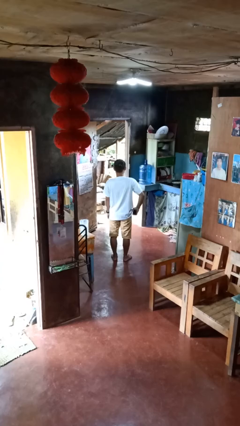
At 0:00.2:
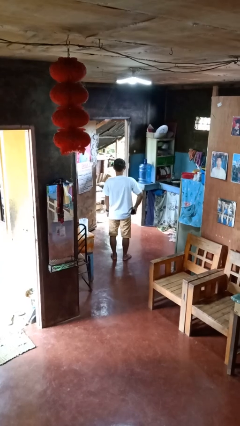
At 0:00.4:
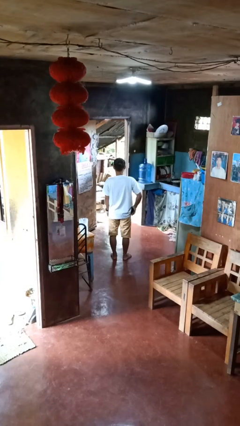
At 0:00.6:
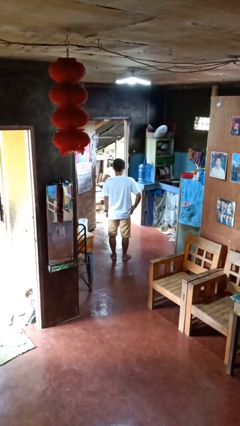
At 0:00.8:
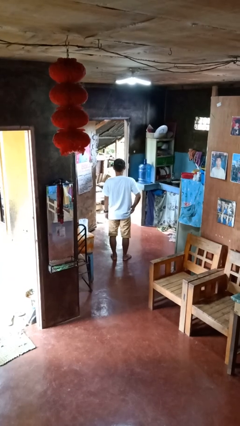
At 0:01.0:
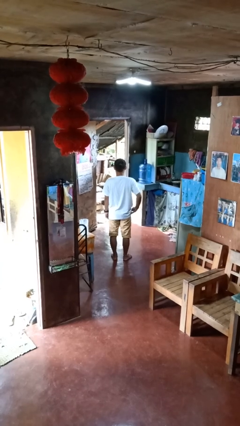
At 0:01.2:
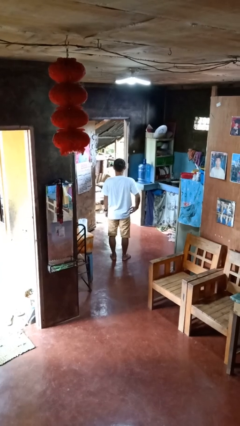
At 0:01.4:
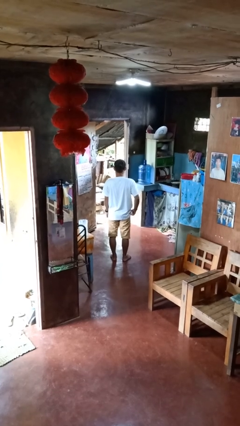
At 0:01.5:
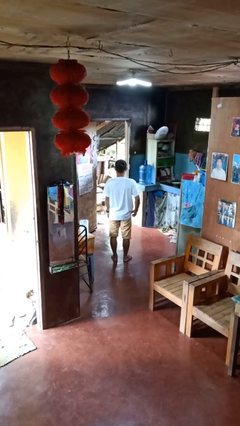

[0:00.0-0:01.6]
person puts phone into pocket

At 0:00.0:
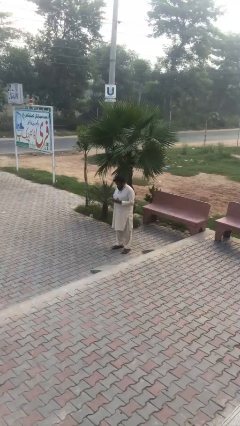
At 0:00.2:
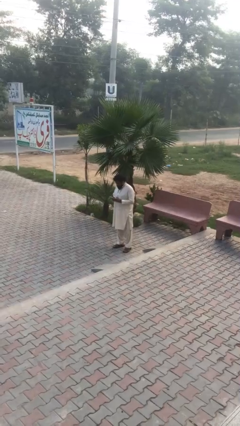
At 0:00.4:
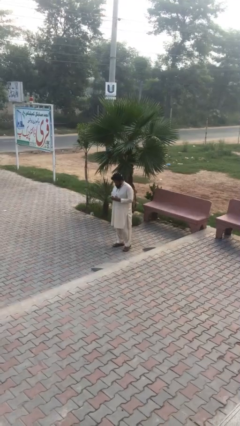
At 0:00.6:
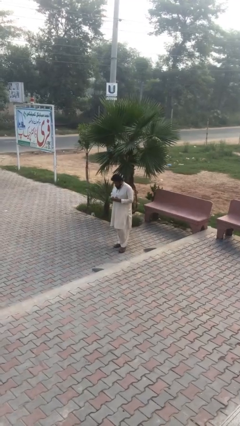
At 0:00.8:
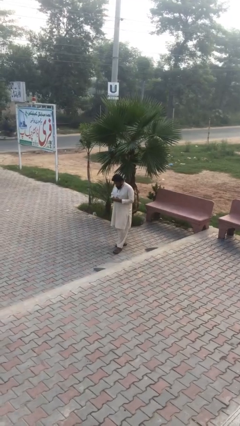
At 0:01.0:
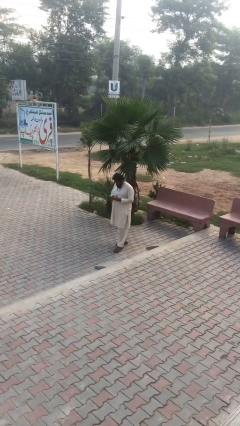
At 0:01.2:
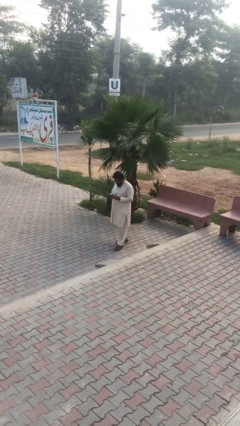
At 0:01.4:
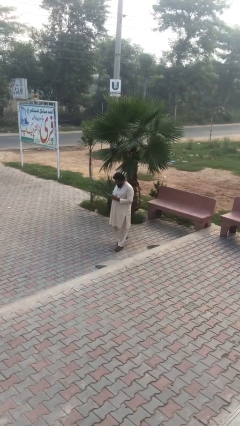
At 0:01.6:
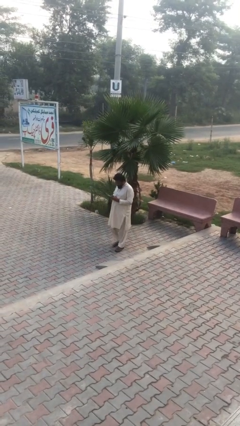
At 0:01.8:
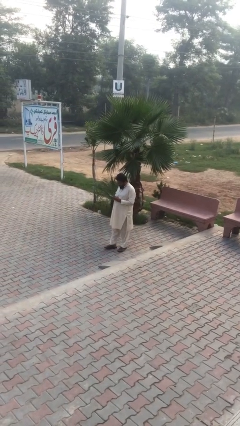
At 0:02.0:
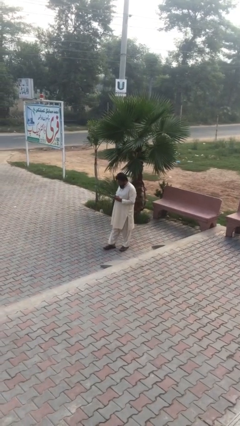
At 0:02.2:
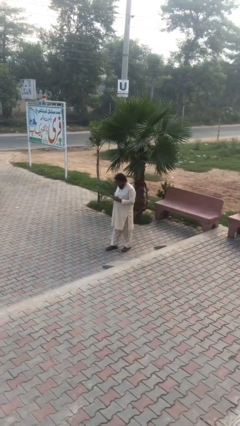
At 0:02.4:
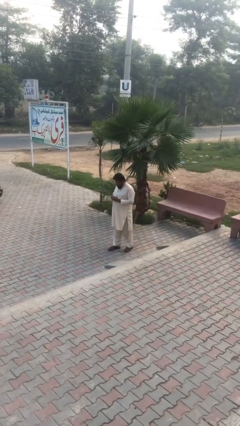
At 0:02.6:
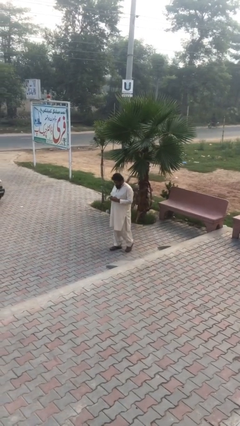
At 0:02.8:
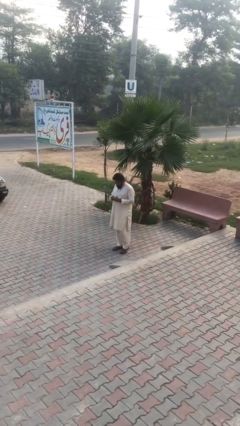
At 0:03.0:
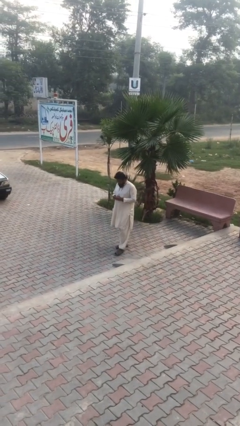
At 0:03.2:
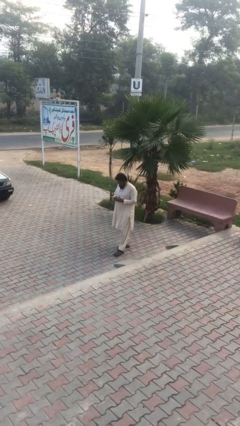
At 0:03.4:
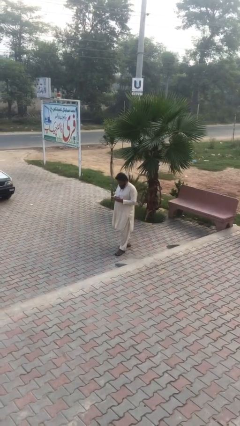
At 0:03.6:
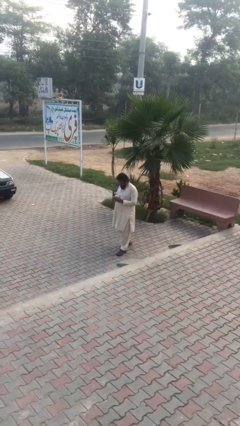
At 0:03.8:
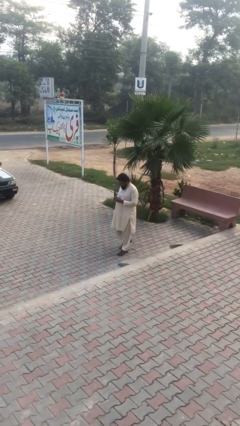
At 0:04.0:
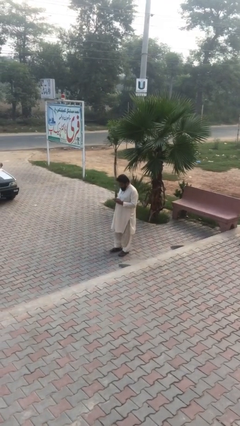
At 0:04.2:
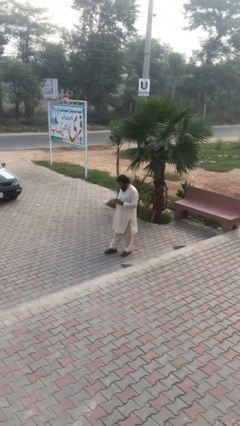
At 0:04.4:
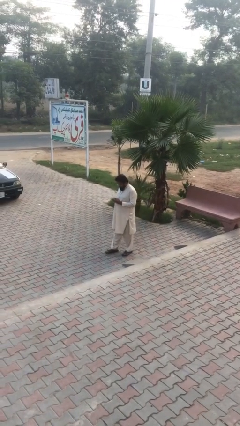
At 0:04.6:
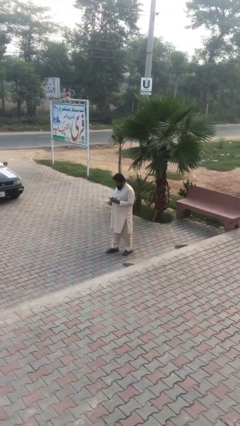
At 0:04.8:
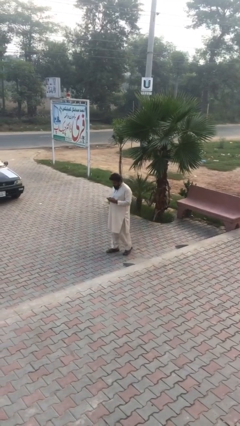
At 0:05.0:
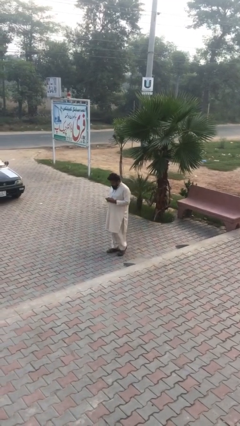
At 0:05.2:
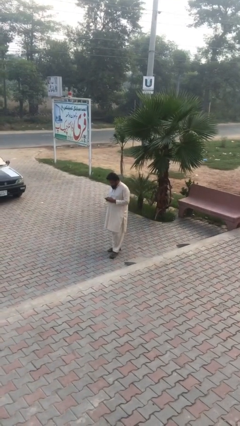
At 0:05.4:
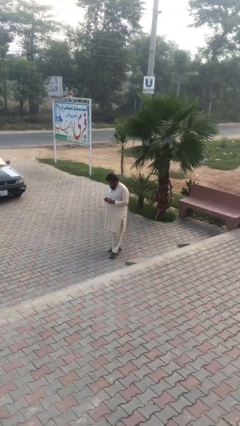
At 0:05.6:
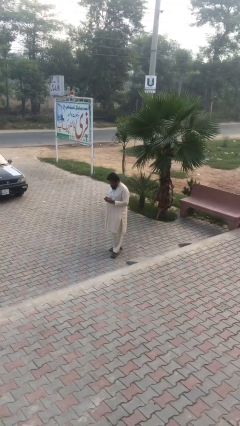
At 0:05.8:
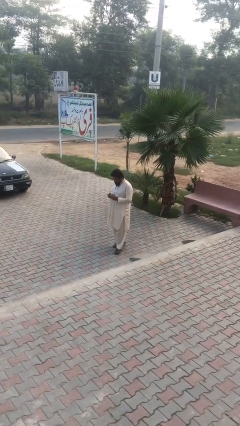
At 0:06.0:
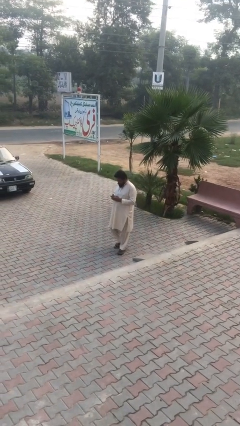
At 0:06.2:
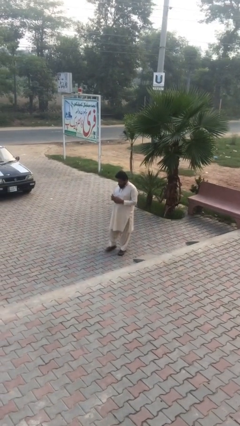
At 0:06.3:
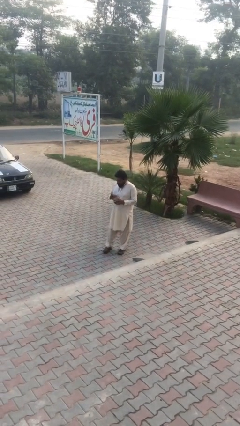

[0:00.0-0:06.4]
person texts on phone

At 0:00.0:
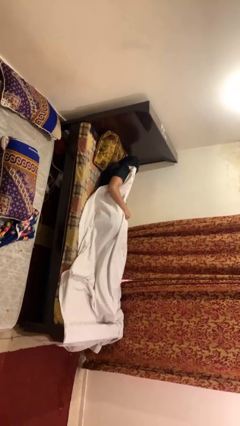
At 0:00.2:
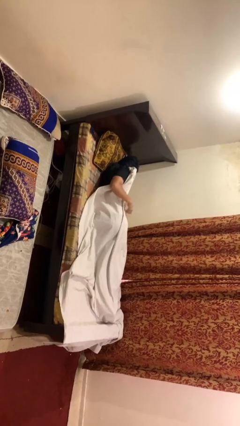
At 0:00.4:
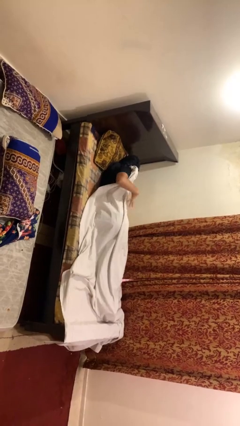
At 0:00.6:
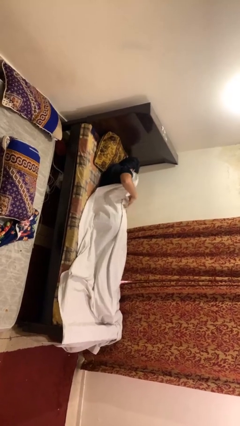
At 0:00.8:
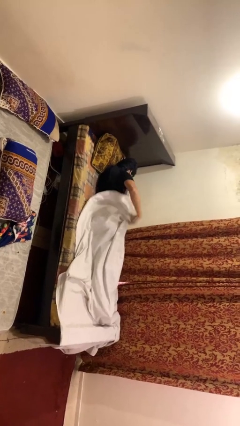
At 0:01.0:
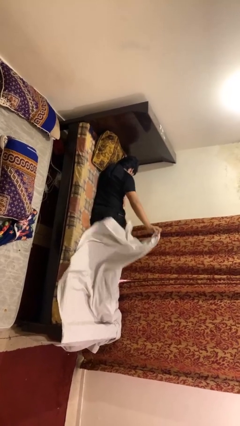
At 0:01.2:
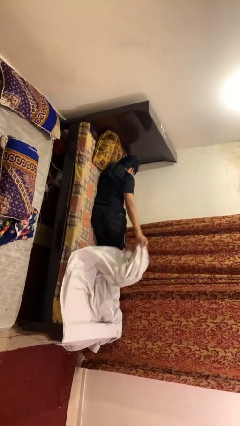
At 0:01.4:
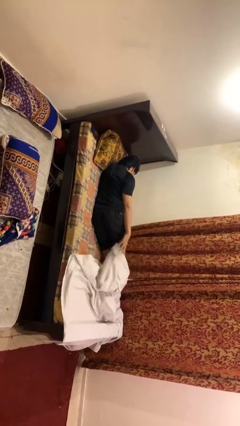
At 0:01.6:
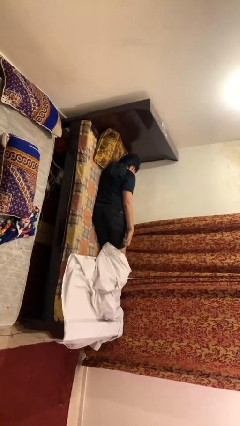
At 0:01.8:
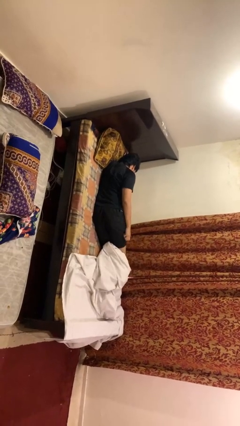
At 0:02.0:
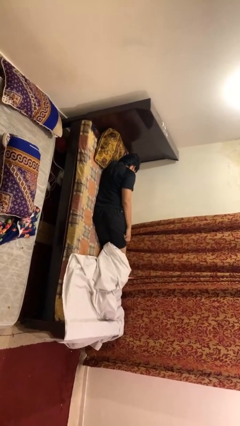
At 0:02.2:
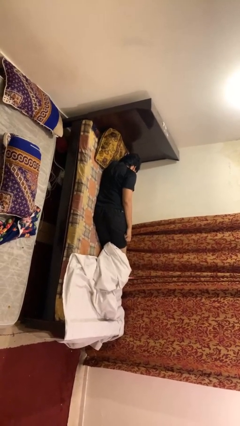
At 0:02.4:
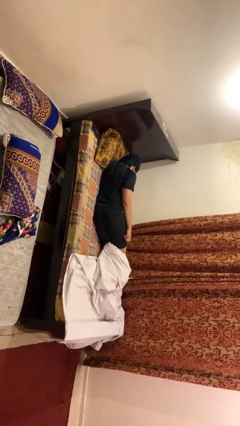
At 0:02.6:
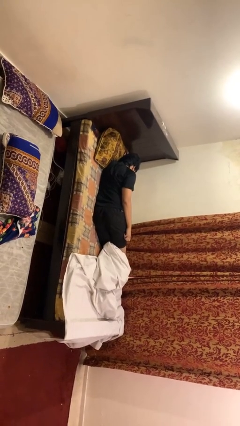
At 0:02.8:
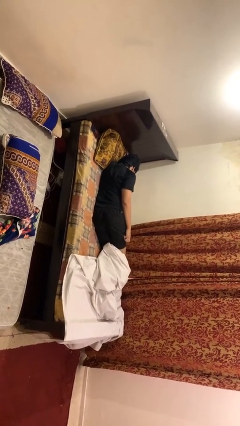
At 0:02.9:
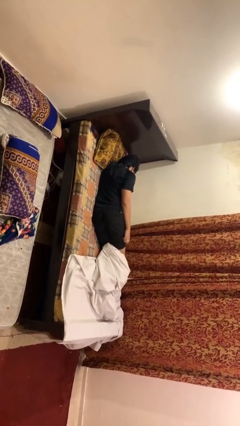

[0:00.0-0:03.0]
person uncovers with bedsheets

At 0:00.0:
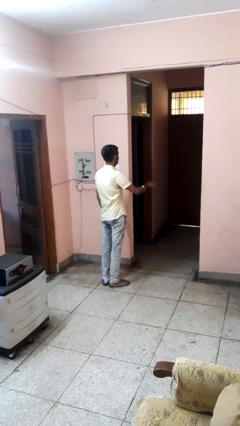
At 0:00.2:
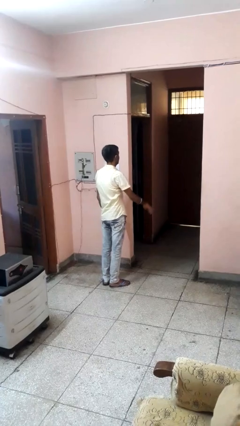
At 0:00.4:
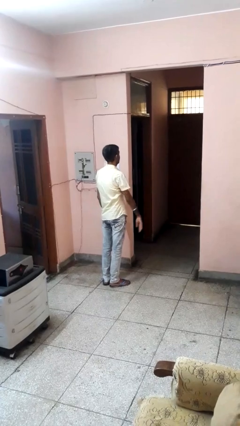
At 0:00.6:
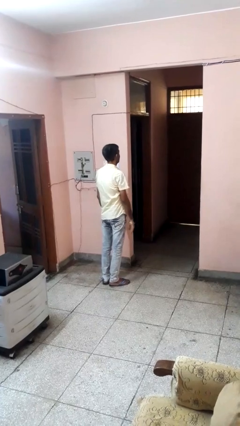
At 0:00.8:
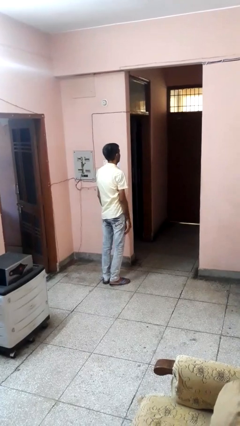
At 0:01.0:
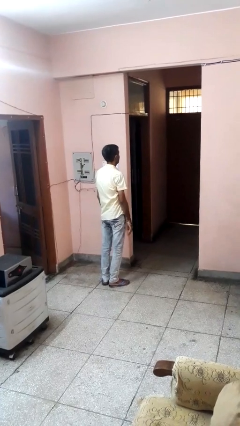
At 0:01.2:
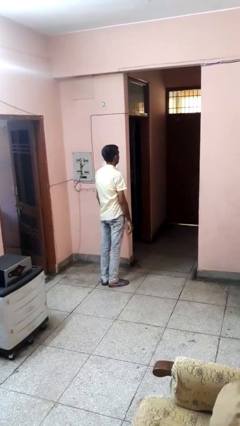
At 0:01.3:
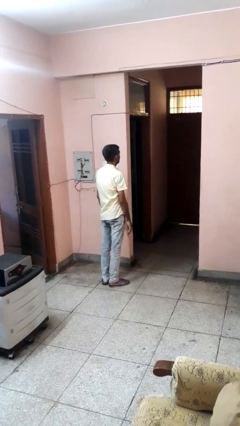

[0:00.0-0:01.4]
person gestures lower hand

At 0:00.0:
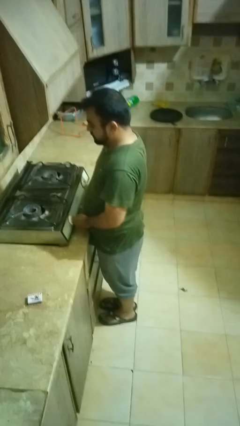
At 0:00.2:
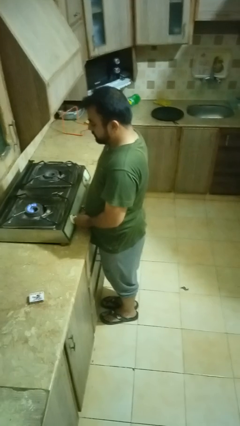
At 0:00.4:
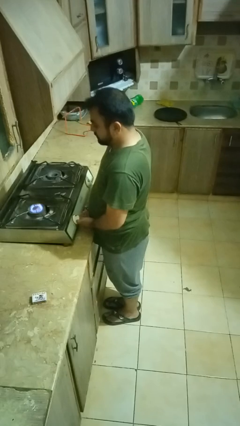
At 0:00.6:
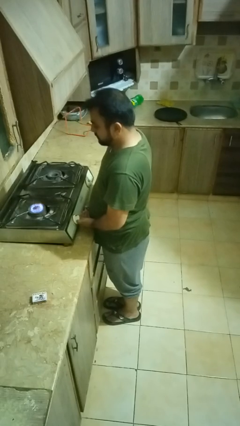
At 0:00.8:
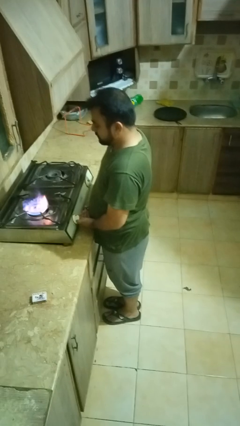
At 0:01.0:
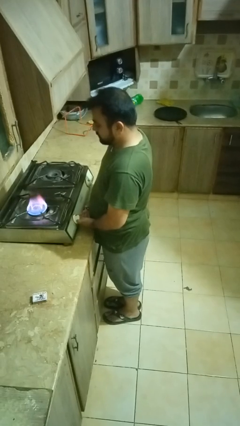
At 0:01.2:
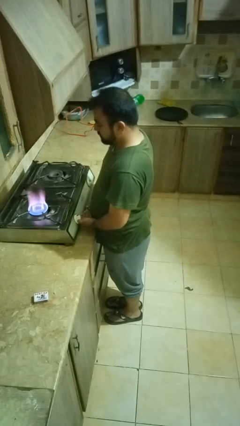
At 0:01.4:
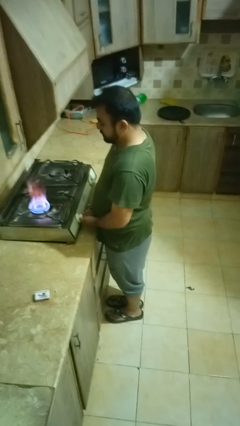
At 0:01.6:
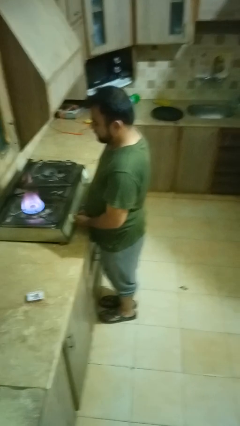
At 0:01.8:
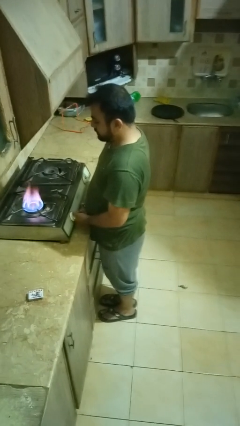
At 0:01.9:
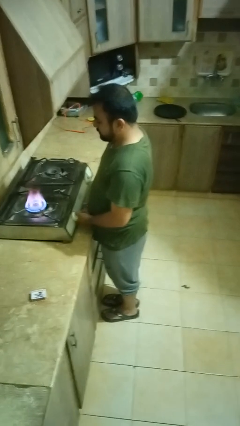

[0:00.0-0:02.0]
person turns on stovetop

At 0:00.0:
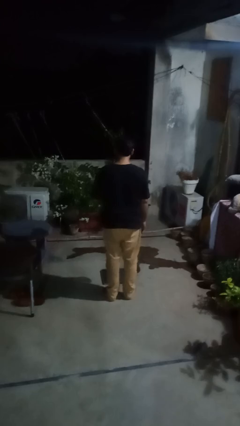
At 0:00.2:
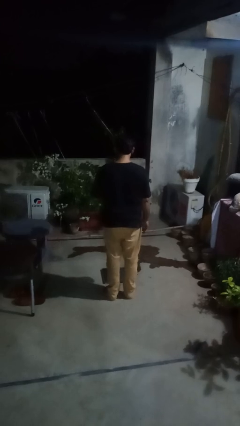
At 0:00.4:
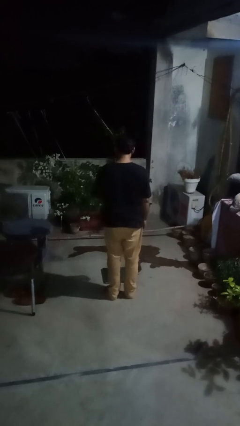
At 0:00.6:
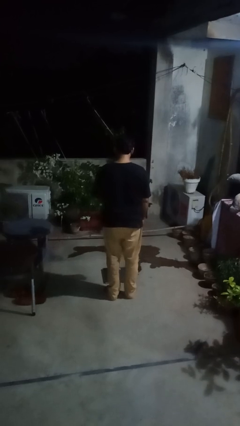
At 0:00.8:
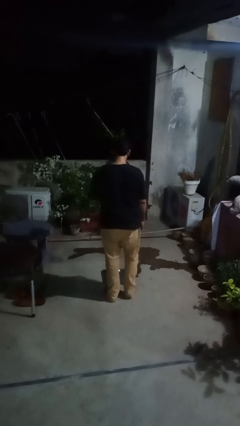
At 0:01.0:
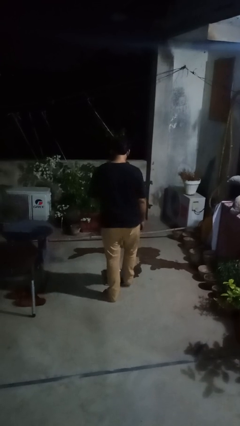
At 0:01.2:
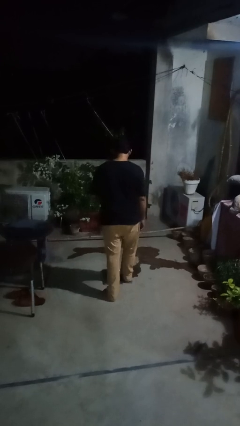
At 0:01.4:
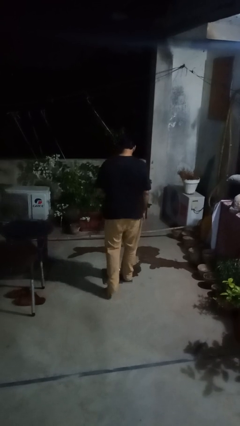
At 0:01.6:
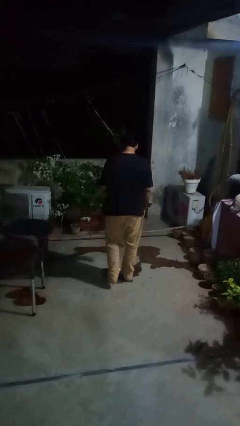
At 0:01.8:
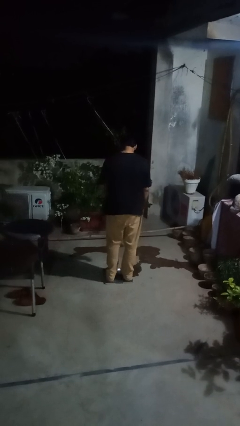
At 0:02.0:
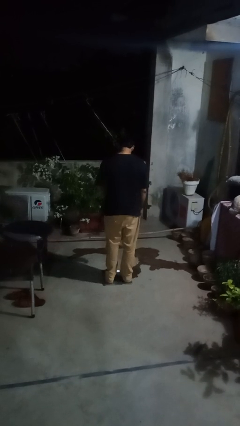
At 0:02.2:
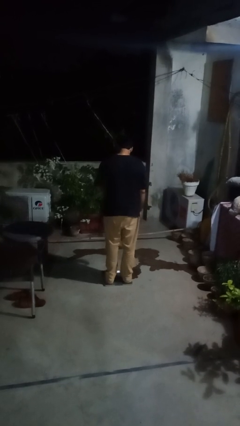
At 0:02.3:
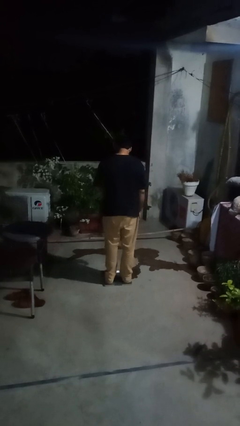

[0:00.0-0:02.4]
person uses bodyweight scale

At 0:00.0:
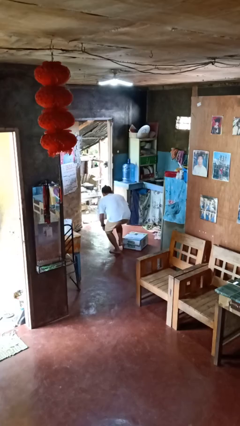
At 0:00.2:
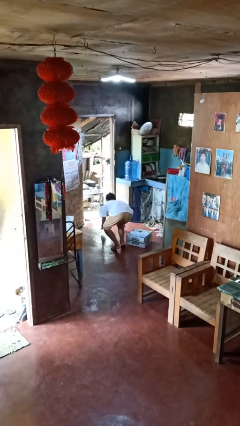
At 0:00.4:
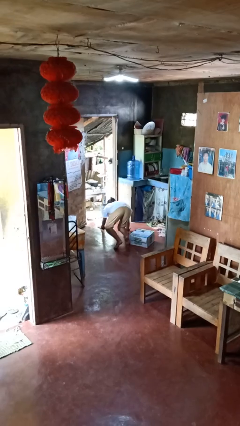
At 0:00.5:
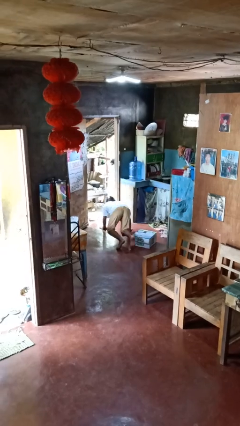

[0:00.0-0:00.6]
person trips on object on floor
